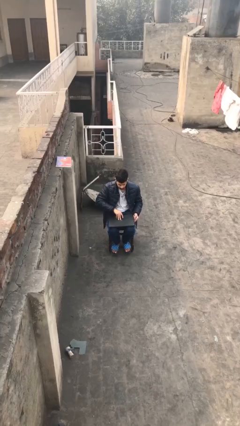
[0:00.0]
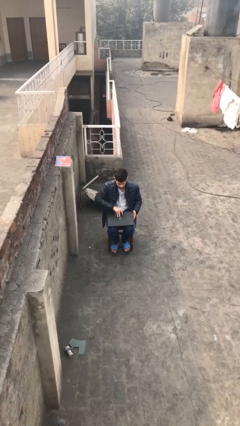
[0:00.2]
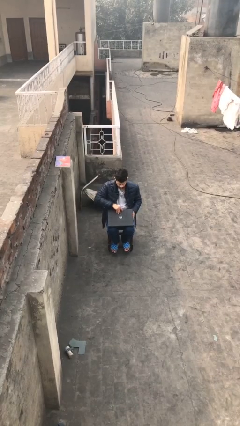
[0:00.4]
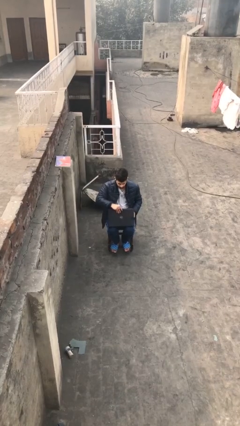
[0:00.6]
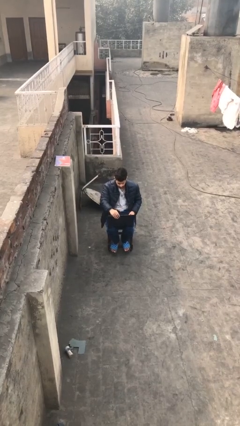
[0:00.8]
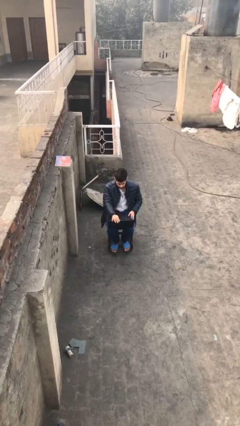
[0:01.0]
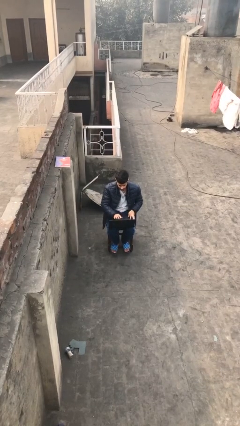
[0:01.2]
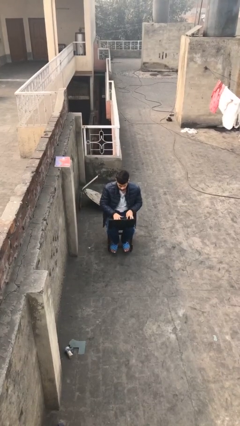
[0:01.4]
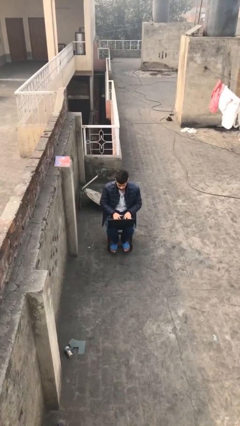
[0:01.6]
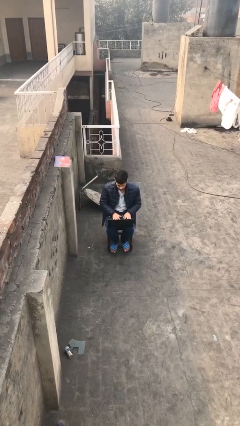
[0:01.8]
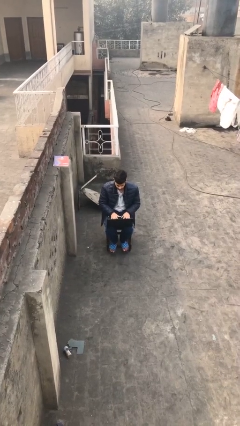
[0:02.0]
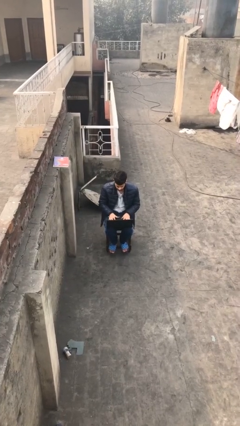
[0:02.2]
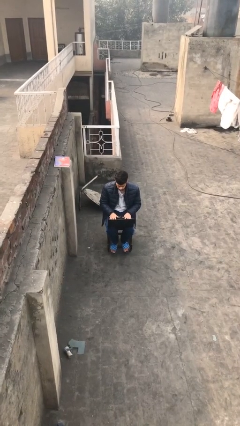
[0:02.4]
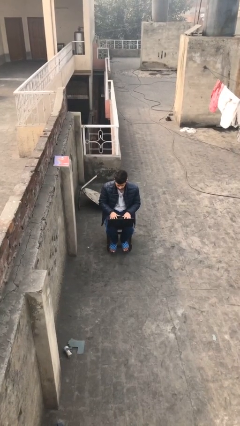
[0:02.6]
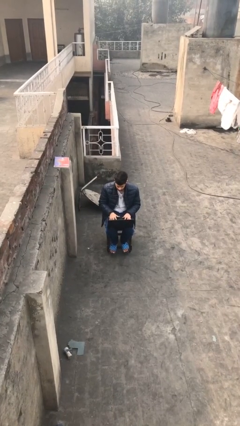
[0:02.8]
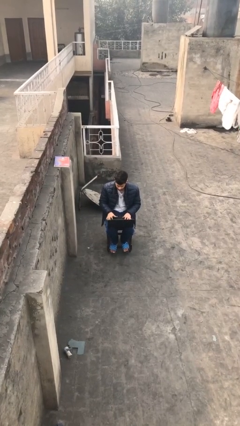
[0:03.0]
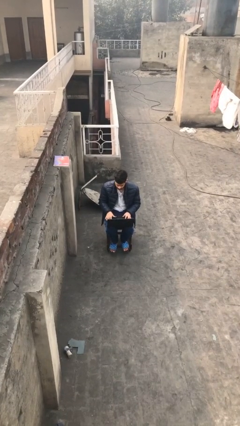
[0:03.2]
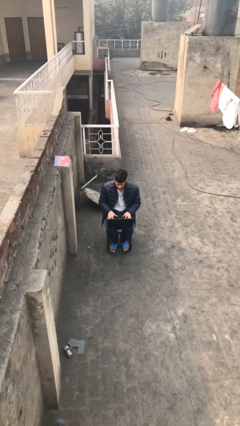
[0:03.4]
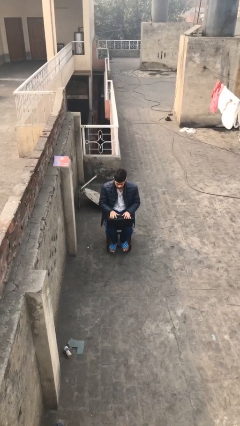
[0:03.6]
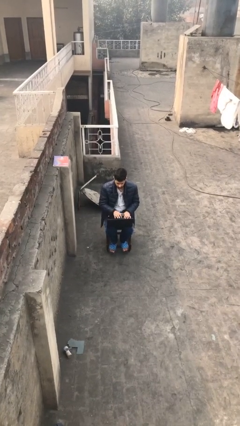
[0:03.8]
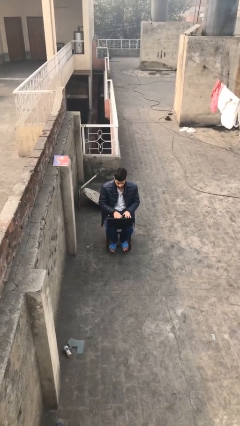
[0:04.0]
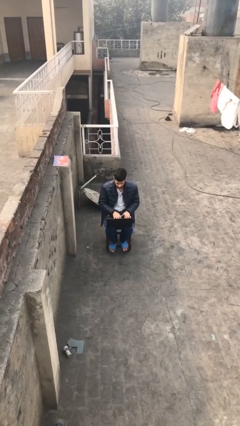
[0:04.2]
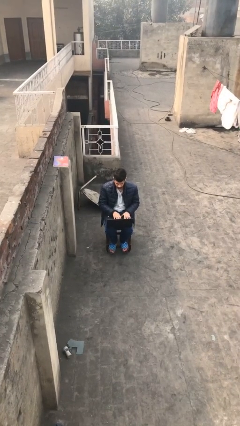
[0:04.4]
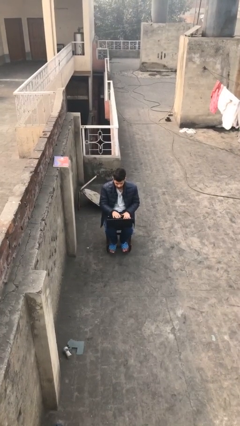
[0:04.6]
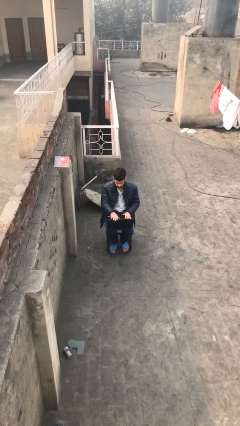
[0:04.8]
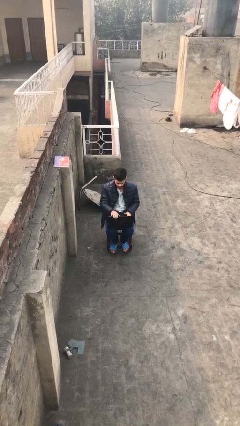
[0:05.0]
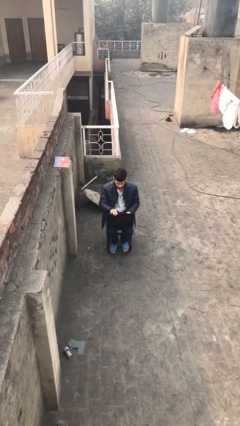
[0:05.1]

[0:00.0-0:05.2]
person interacts with laptop

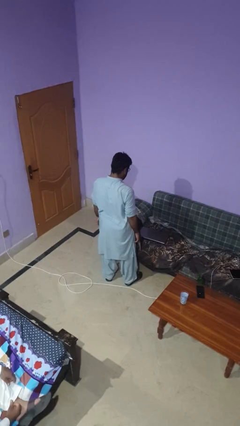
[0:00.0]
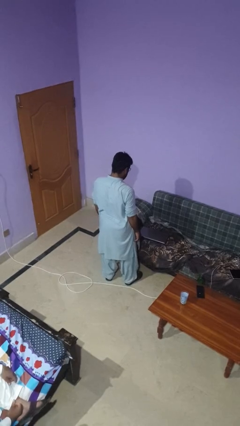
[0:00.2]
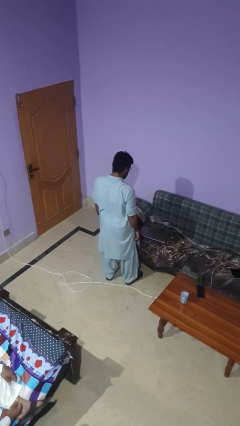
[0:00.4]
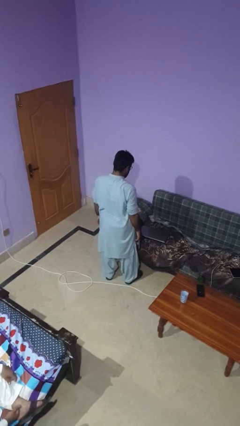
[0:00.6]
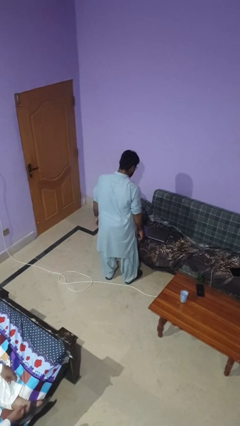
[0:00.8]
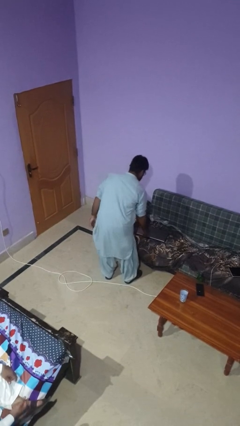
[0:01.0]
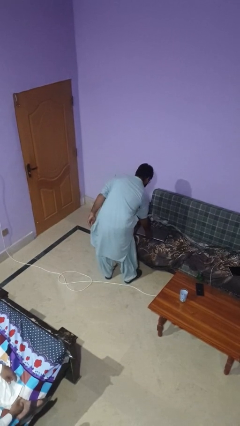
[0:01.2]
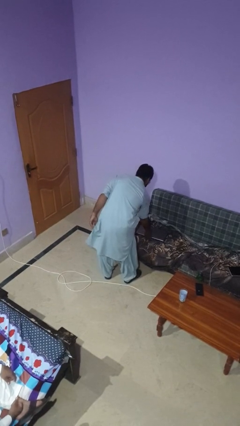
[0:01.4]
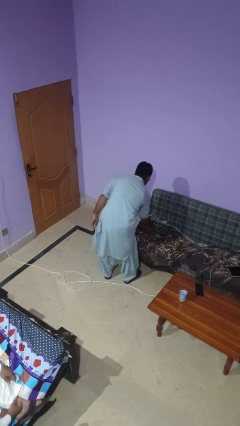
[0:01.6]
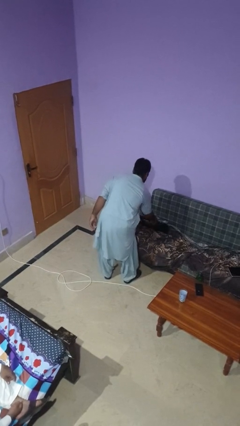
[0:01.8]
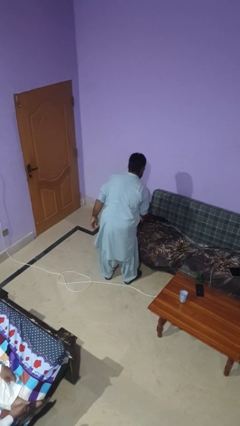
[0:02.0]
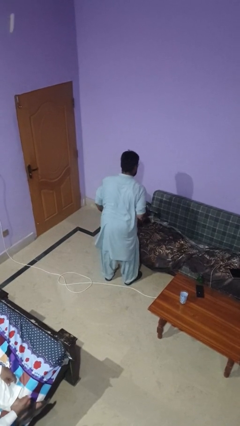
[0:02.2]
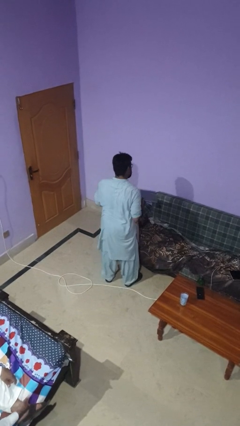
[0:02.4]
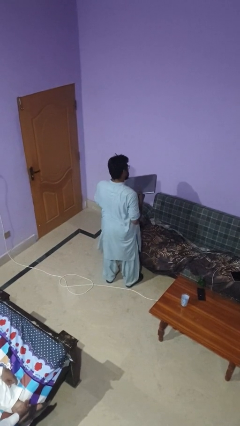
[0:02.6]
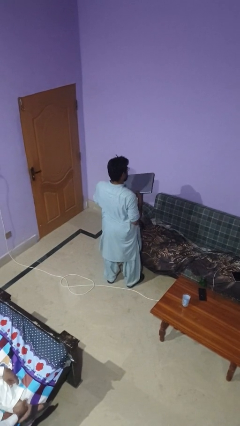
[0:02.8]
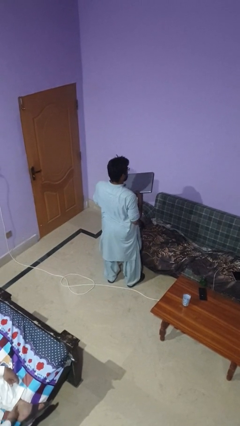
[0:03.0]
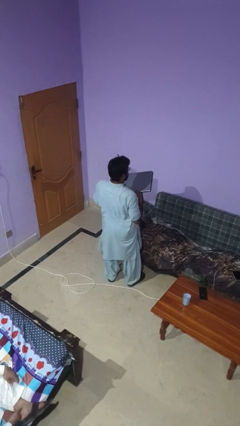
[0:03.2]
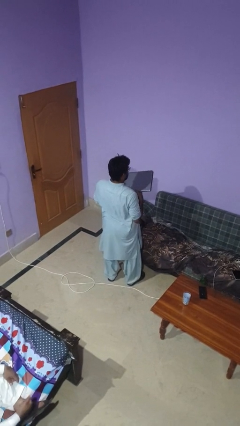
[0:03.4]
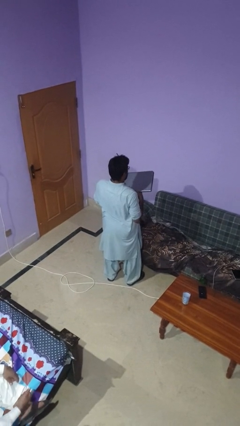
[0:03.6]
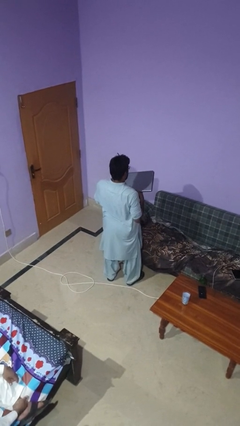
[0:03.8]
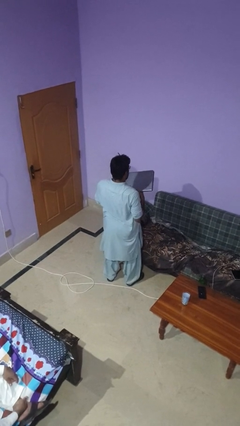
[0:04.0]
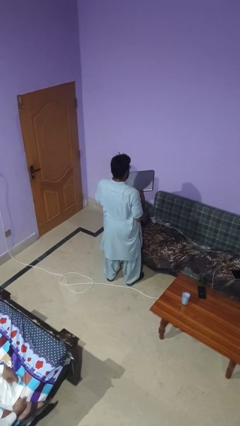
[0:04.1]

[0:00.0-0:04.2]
person picks up object from couch

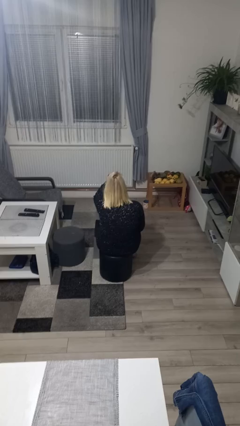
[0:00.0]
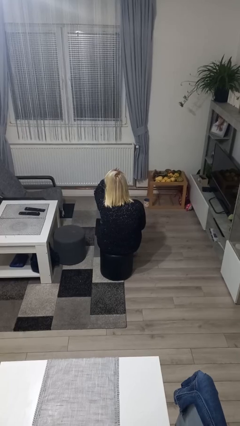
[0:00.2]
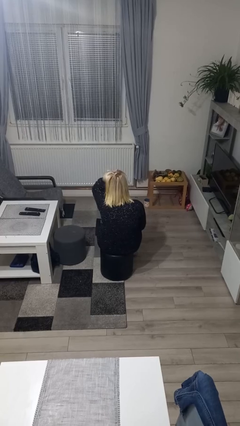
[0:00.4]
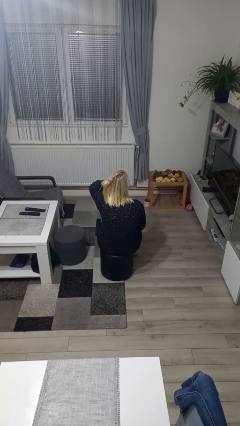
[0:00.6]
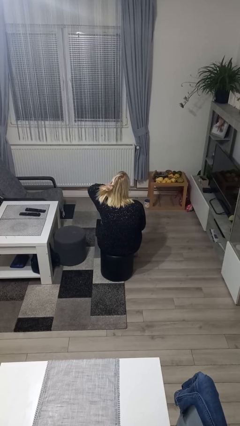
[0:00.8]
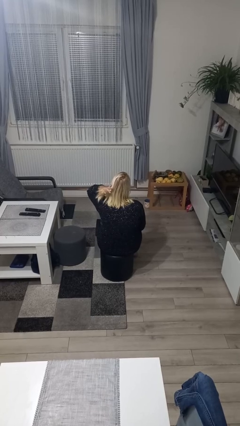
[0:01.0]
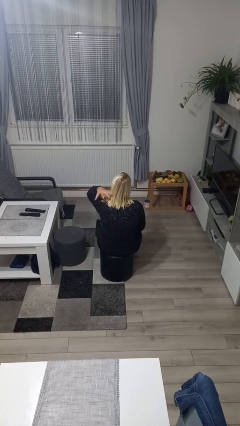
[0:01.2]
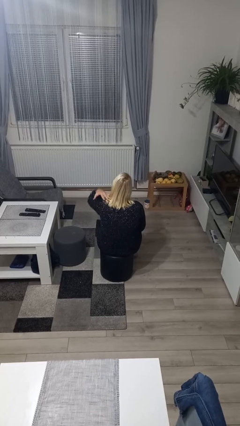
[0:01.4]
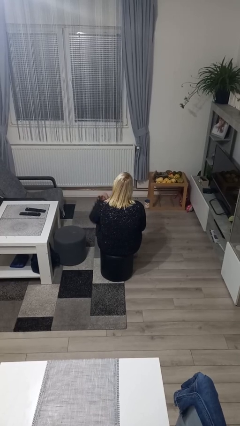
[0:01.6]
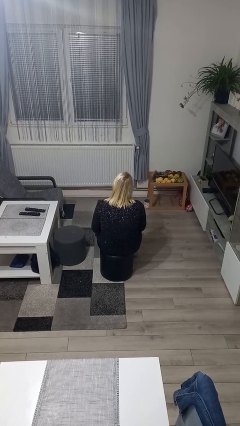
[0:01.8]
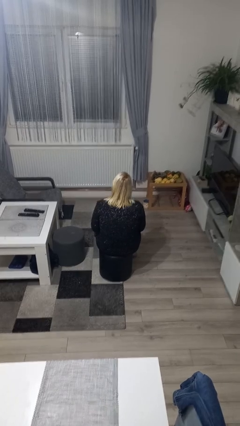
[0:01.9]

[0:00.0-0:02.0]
person strokes hair

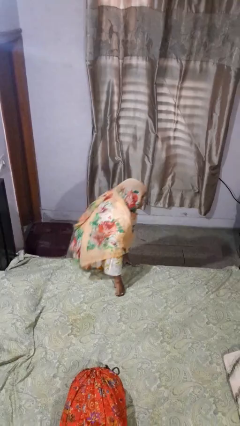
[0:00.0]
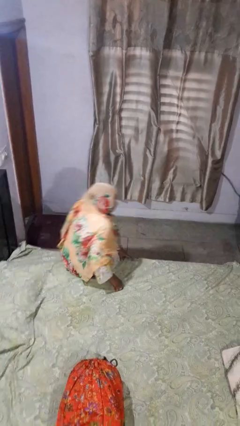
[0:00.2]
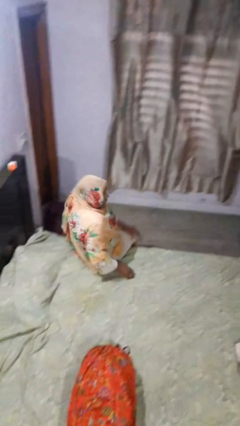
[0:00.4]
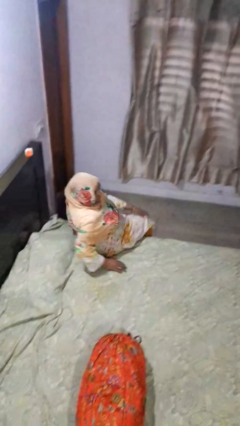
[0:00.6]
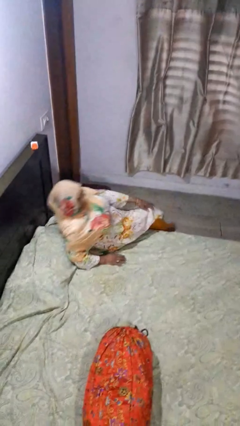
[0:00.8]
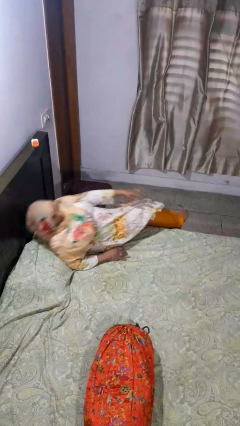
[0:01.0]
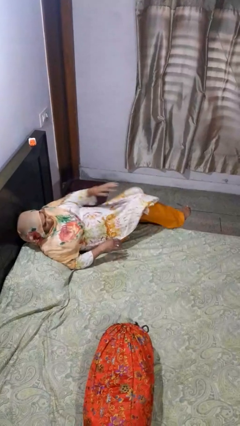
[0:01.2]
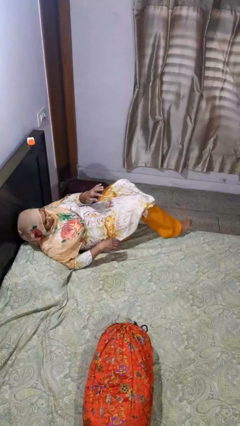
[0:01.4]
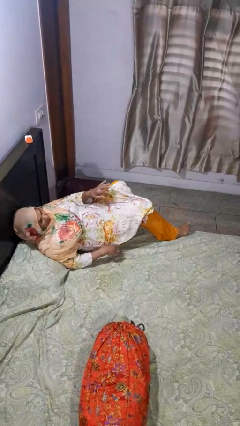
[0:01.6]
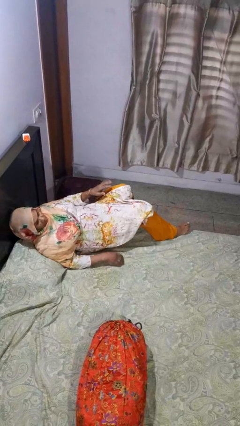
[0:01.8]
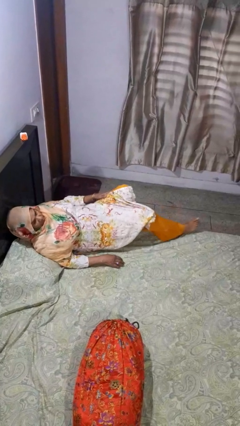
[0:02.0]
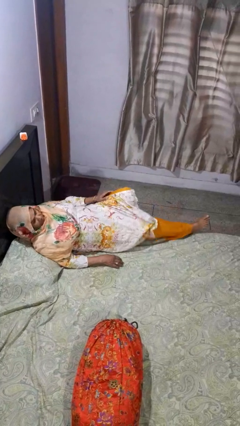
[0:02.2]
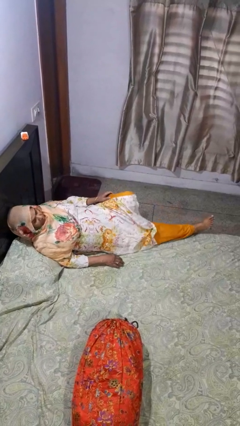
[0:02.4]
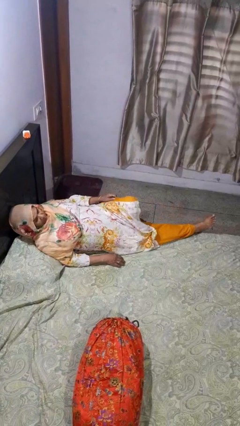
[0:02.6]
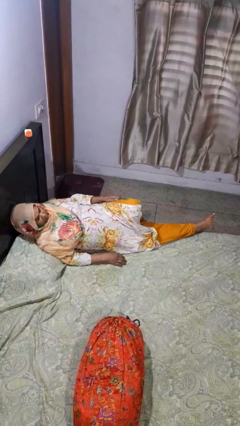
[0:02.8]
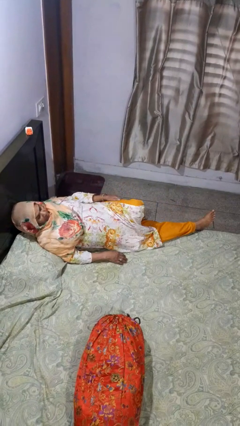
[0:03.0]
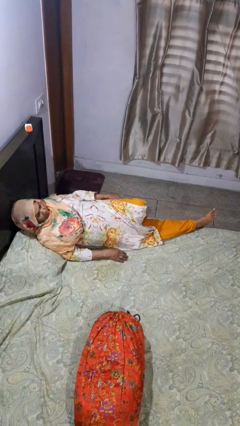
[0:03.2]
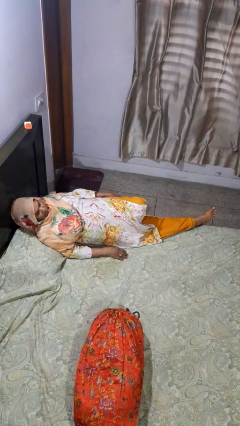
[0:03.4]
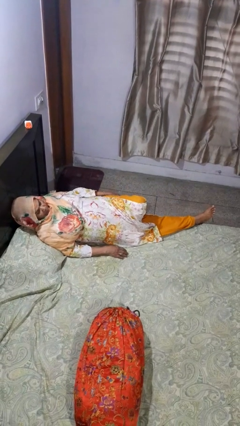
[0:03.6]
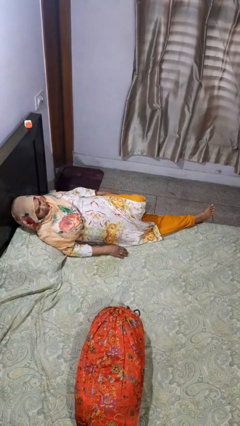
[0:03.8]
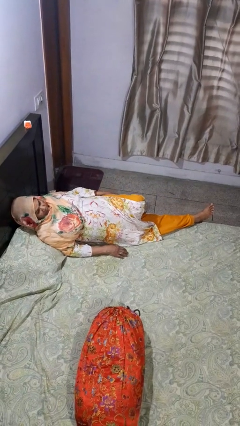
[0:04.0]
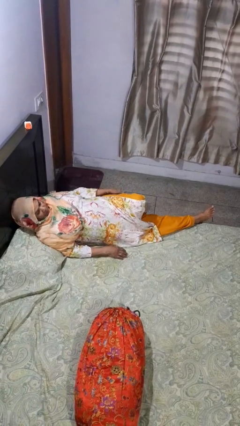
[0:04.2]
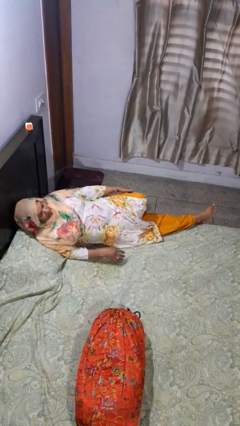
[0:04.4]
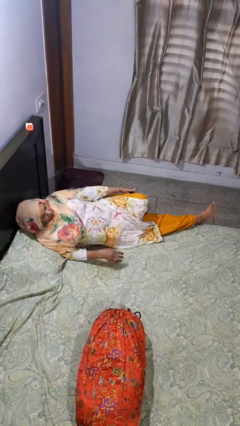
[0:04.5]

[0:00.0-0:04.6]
person lies down on bed

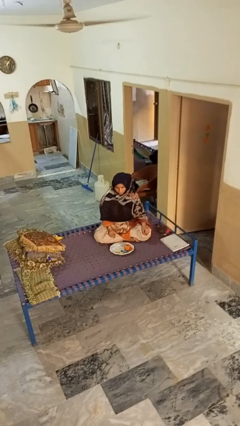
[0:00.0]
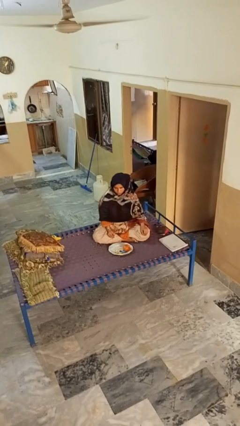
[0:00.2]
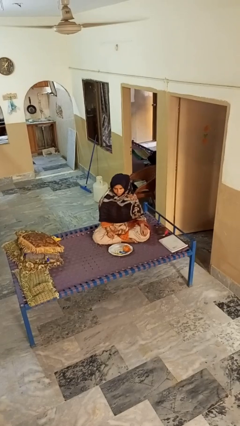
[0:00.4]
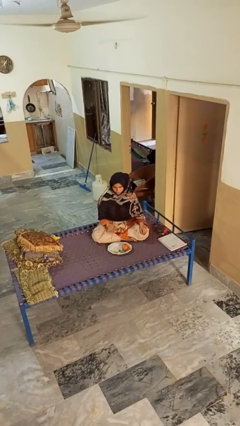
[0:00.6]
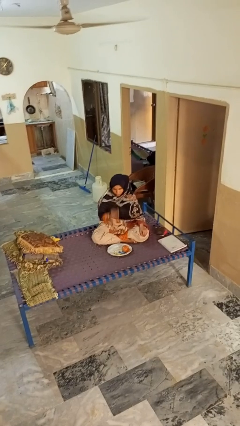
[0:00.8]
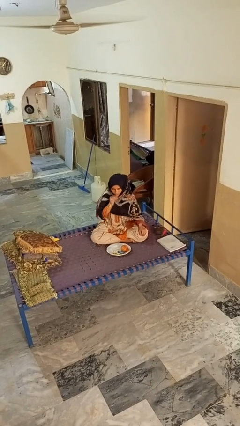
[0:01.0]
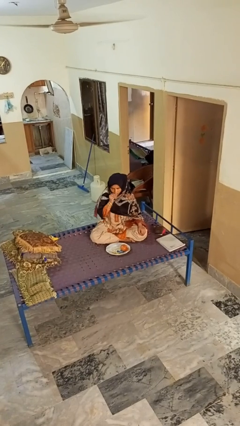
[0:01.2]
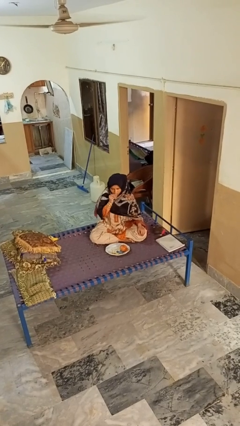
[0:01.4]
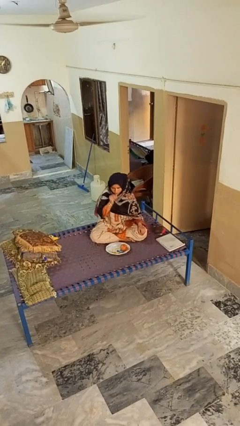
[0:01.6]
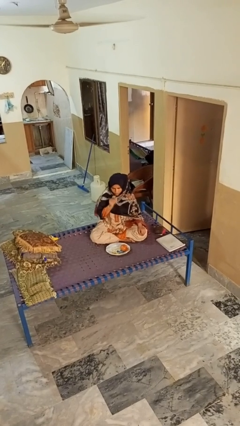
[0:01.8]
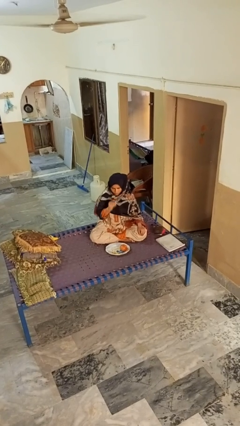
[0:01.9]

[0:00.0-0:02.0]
person eats apple
